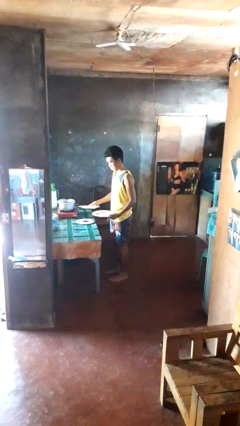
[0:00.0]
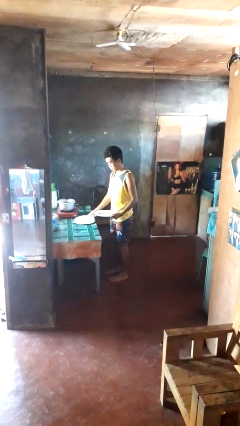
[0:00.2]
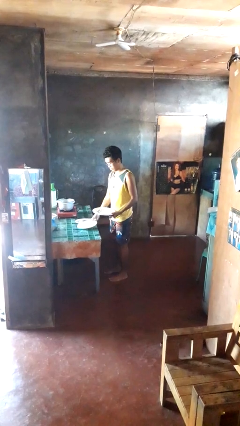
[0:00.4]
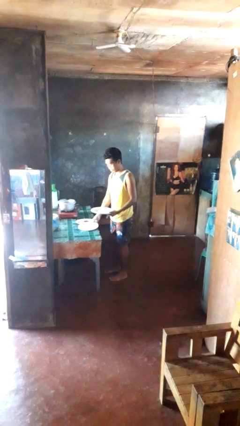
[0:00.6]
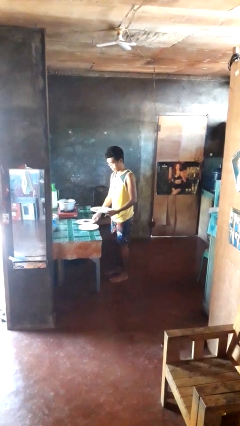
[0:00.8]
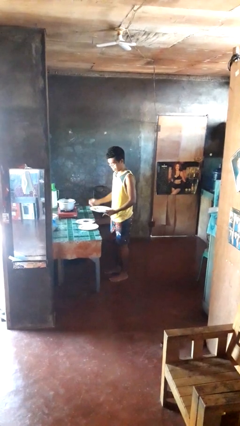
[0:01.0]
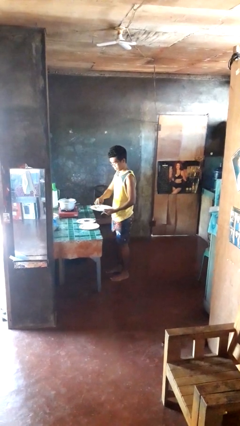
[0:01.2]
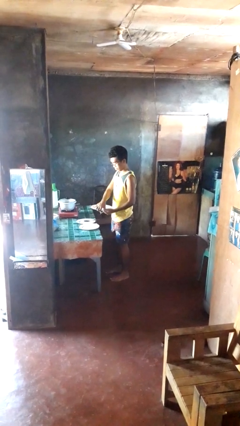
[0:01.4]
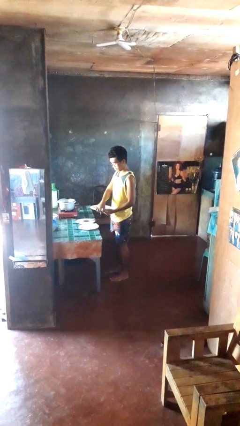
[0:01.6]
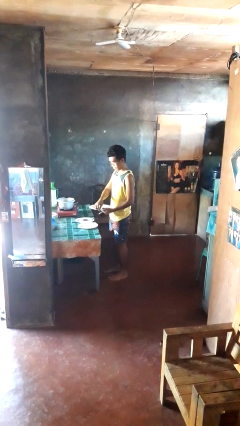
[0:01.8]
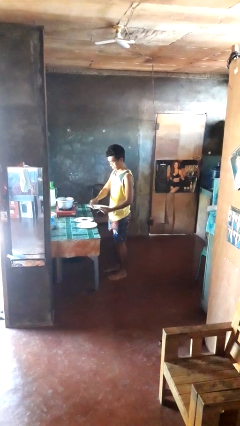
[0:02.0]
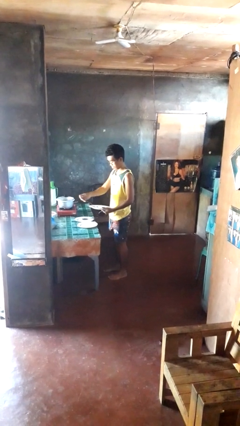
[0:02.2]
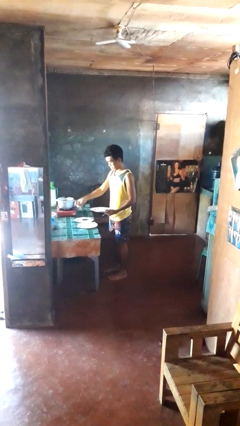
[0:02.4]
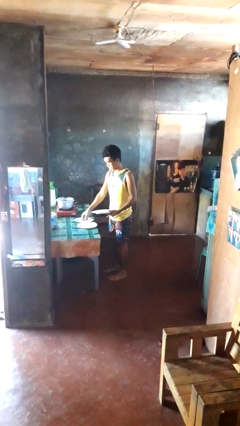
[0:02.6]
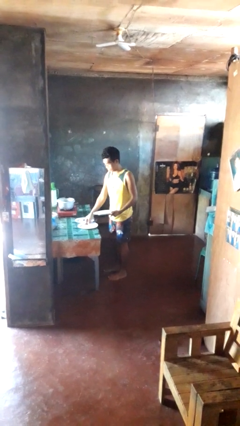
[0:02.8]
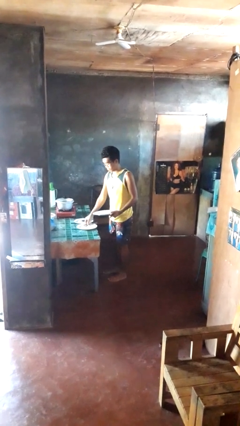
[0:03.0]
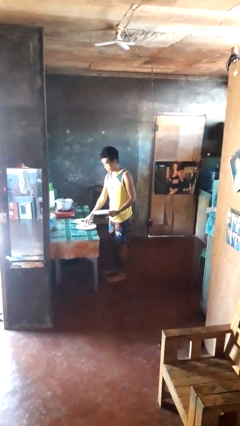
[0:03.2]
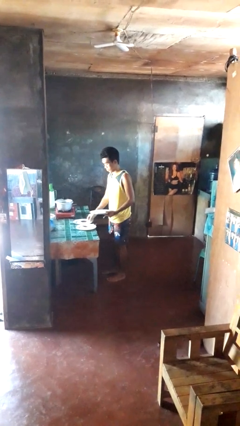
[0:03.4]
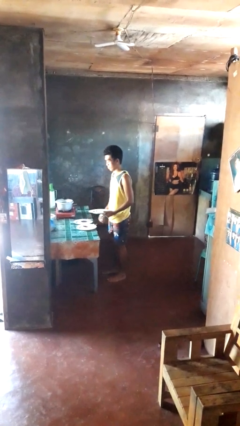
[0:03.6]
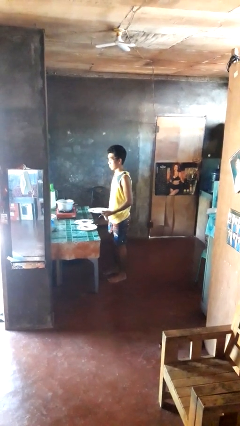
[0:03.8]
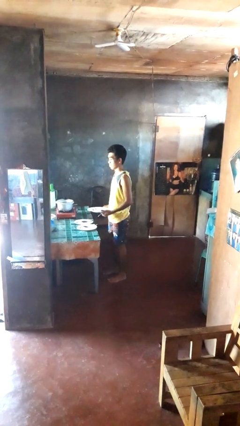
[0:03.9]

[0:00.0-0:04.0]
person sets table

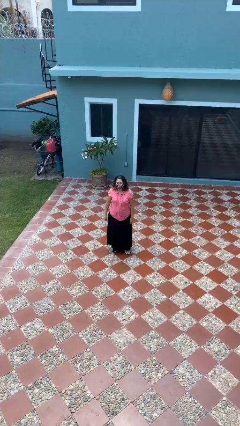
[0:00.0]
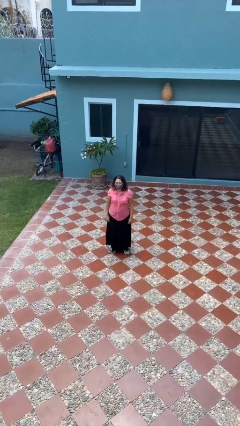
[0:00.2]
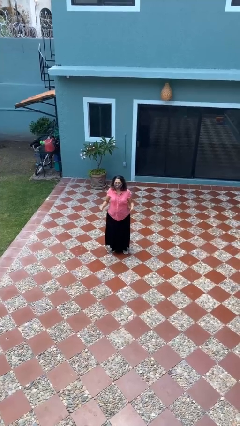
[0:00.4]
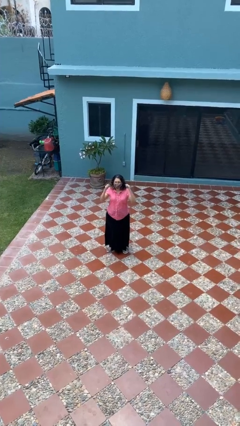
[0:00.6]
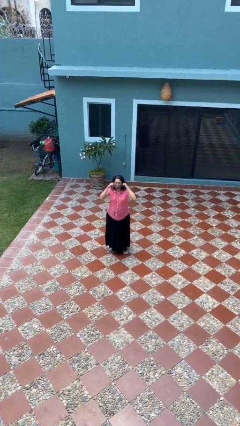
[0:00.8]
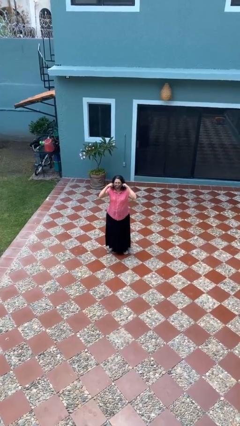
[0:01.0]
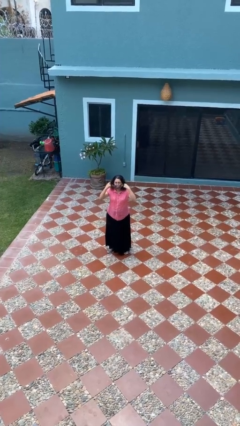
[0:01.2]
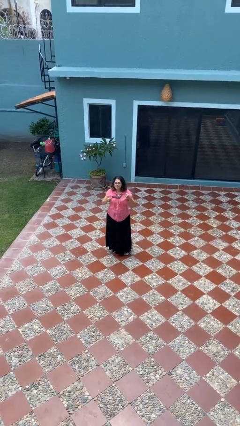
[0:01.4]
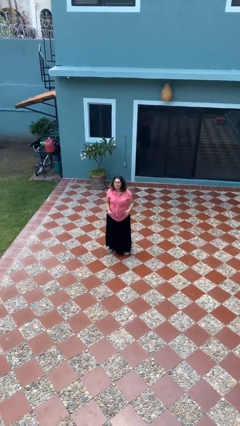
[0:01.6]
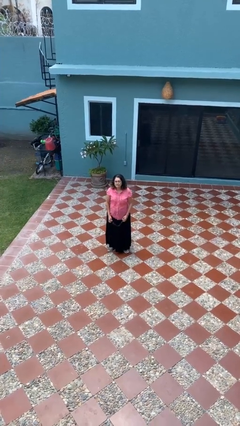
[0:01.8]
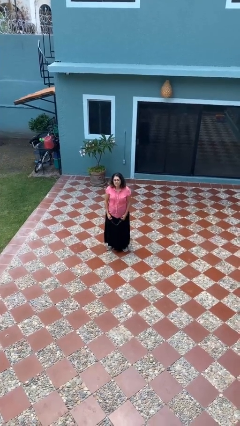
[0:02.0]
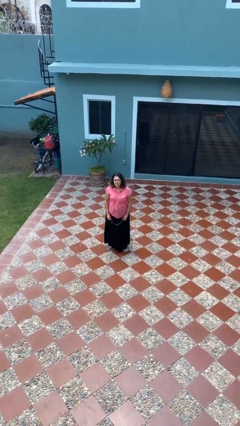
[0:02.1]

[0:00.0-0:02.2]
person takes off facemask

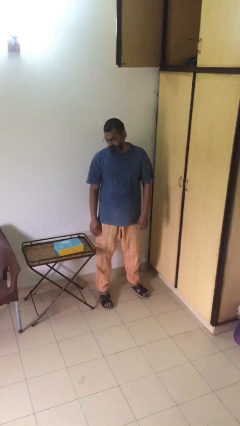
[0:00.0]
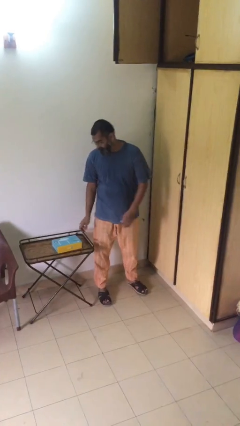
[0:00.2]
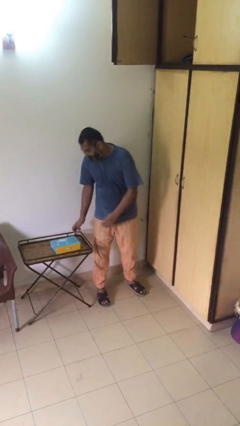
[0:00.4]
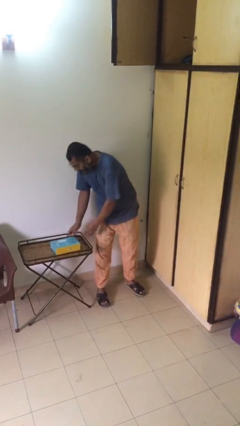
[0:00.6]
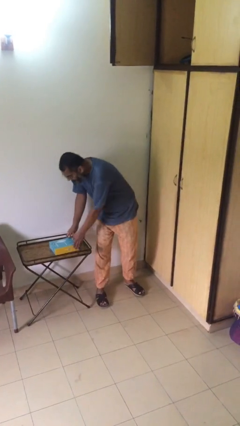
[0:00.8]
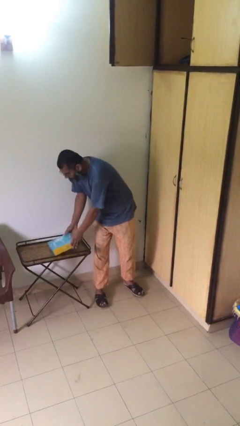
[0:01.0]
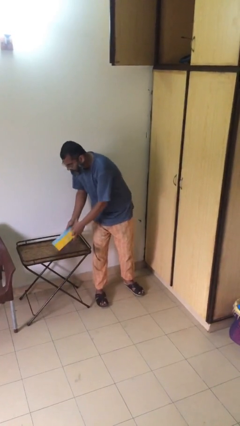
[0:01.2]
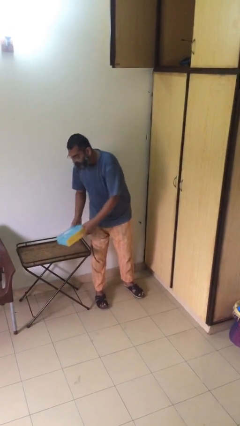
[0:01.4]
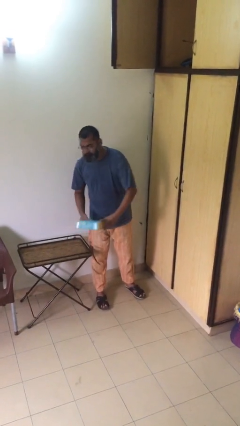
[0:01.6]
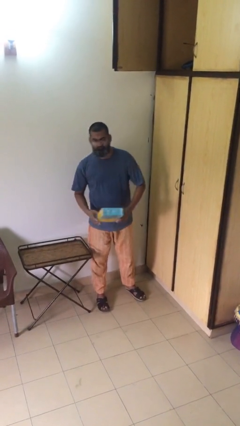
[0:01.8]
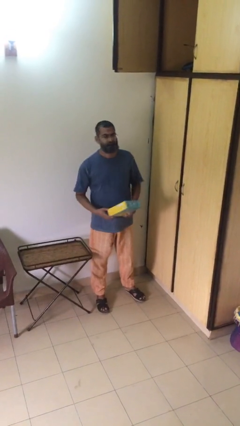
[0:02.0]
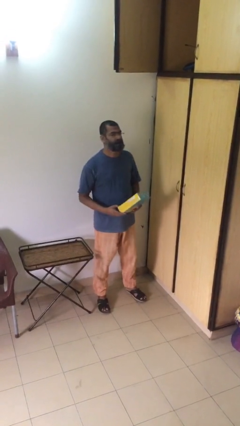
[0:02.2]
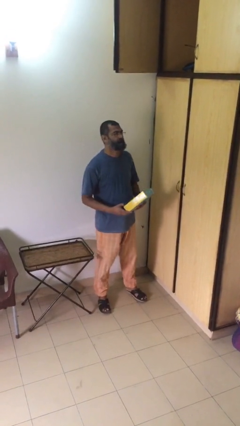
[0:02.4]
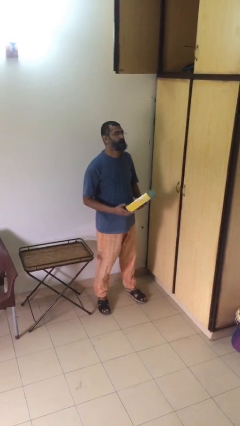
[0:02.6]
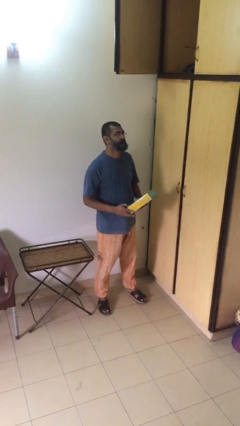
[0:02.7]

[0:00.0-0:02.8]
person picks up object from table

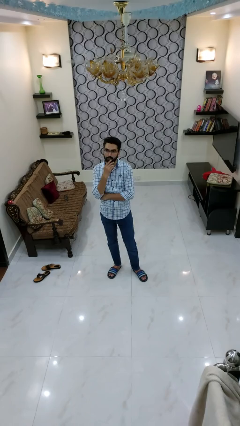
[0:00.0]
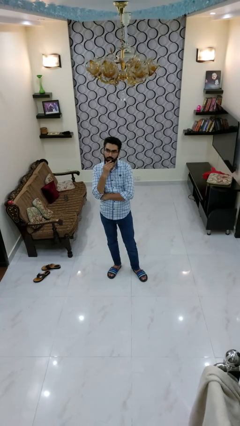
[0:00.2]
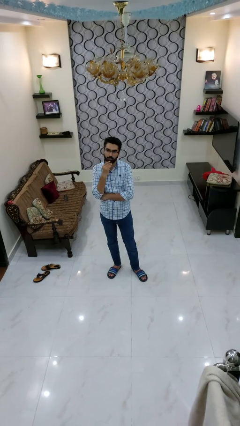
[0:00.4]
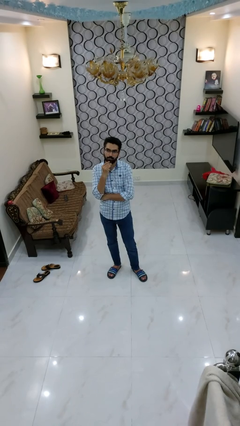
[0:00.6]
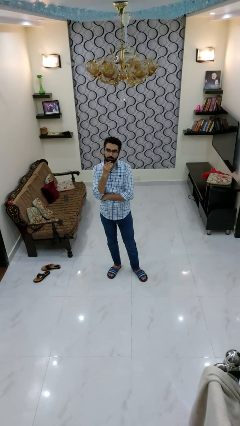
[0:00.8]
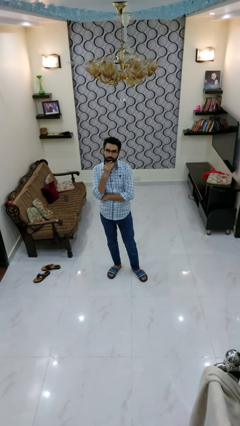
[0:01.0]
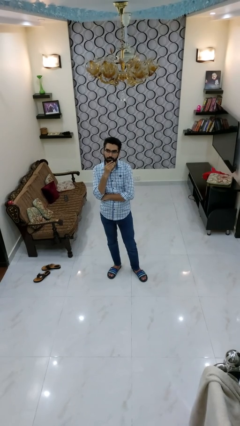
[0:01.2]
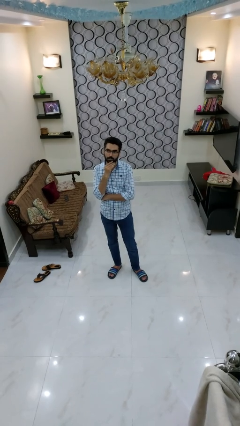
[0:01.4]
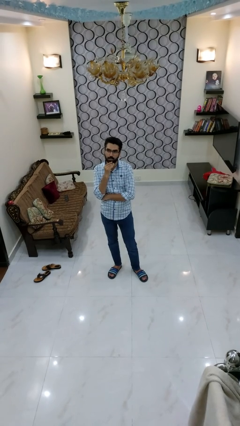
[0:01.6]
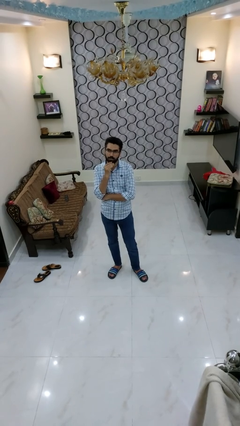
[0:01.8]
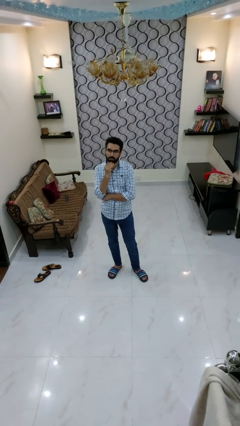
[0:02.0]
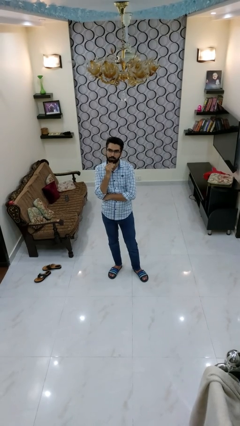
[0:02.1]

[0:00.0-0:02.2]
person strokes chin

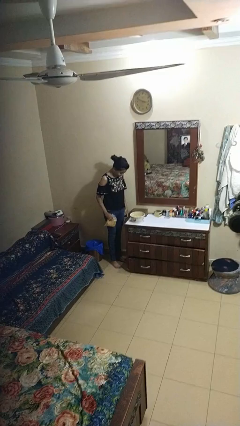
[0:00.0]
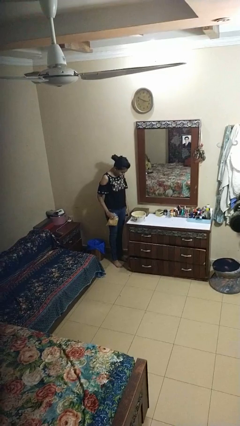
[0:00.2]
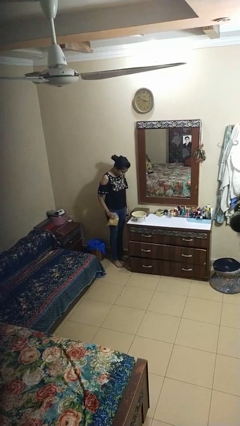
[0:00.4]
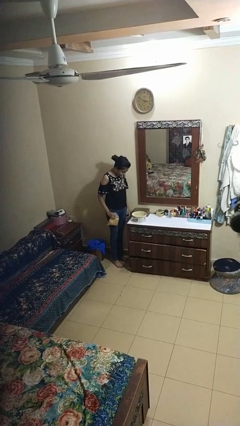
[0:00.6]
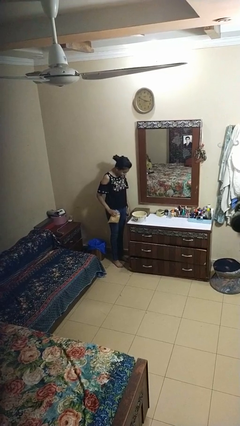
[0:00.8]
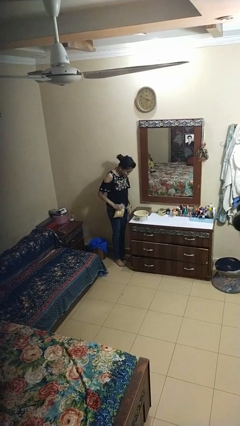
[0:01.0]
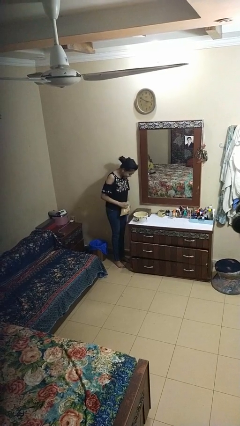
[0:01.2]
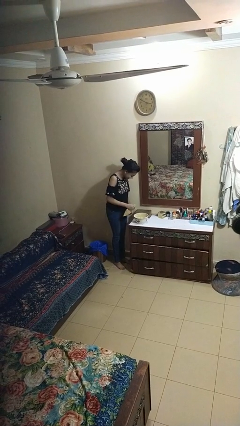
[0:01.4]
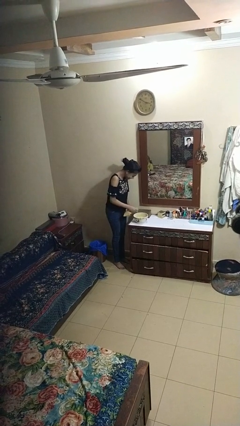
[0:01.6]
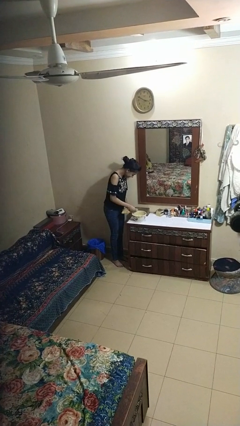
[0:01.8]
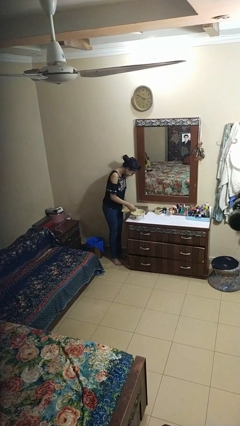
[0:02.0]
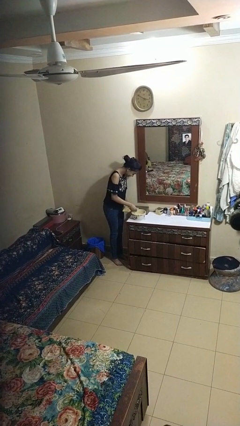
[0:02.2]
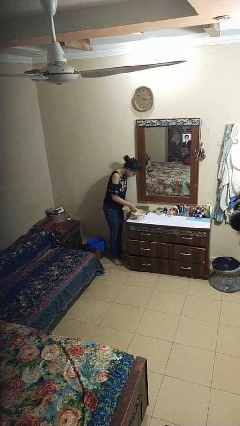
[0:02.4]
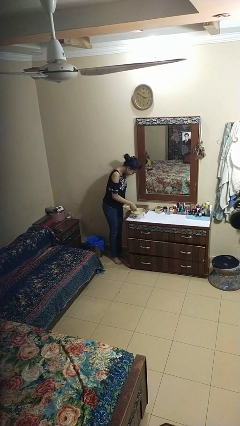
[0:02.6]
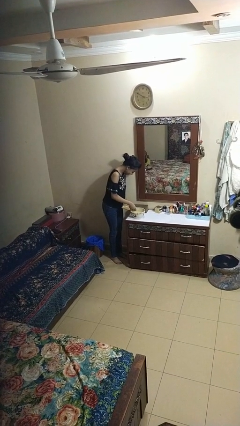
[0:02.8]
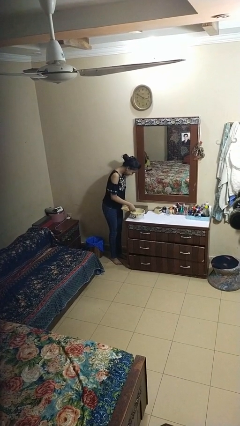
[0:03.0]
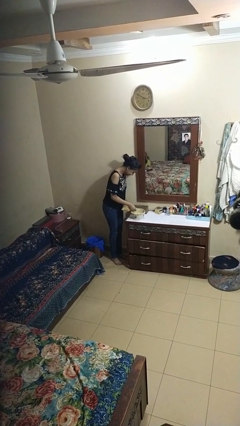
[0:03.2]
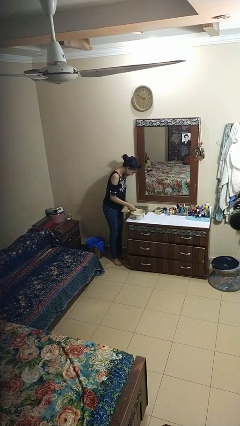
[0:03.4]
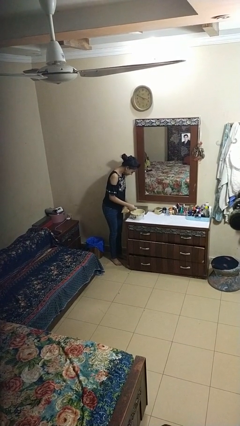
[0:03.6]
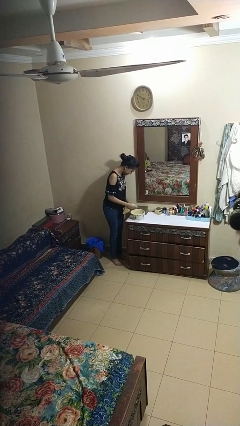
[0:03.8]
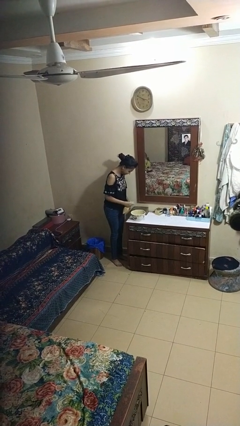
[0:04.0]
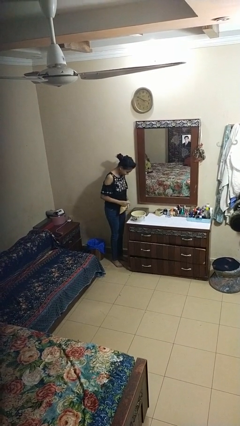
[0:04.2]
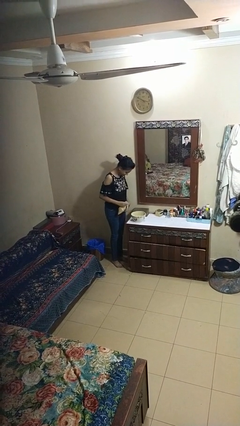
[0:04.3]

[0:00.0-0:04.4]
person pours into bowl

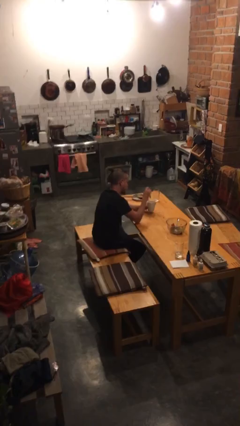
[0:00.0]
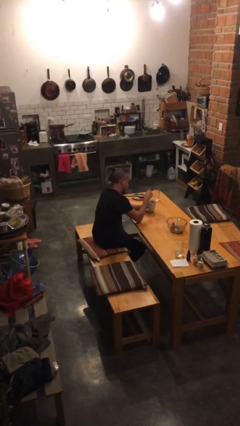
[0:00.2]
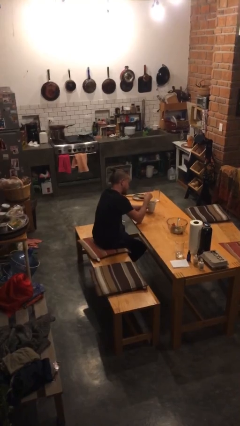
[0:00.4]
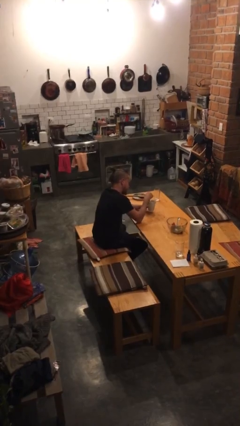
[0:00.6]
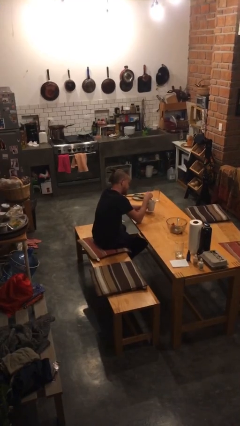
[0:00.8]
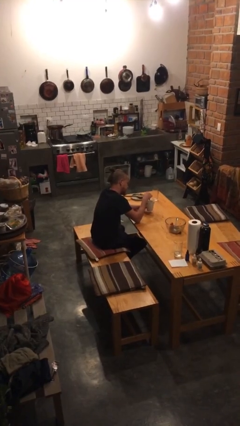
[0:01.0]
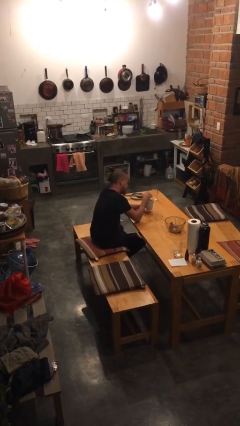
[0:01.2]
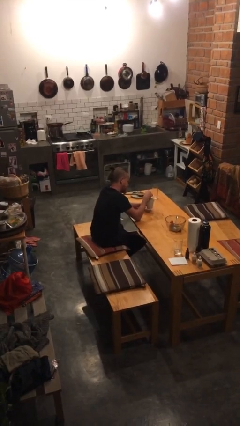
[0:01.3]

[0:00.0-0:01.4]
person stirs mug

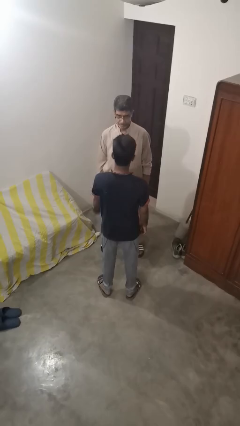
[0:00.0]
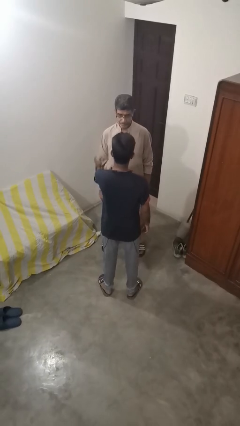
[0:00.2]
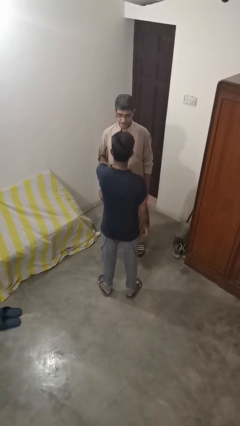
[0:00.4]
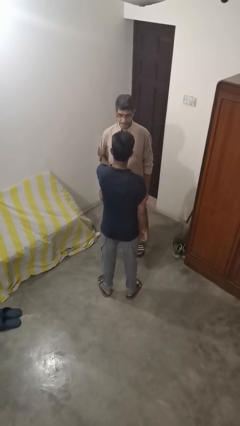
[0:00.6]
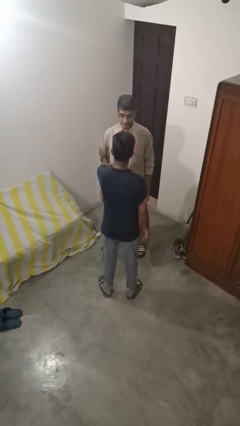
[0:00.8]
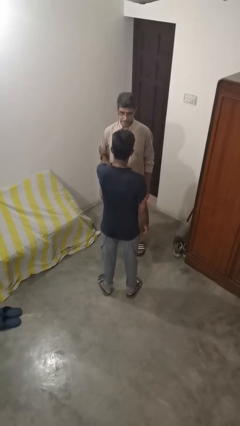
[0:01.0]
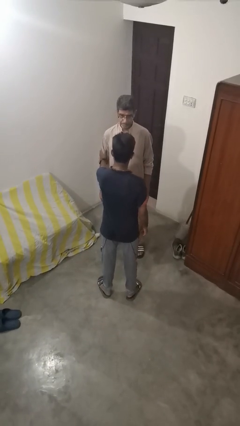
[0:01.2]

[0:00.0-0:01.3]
person grabs person by bicep
